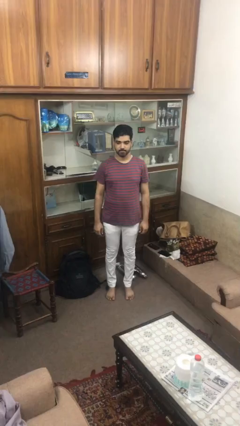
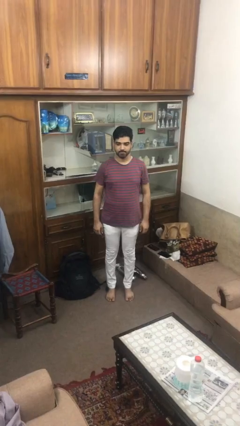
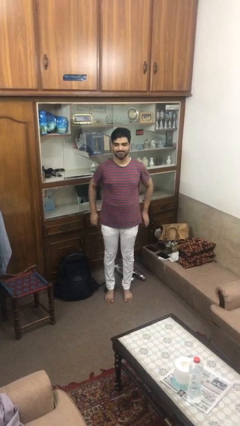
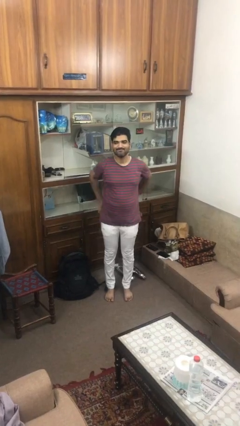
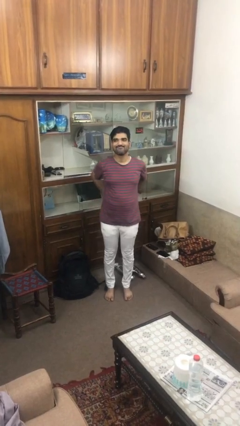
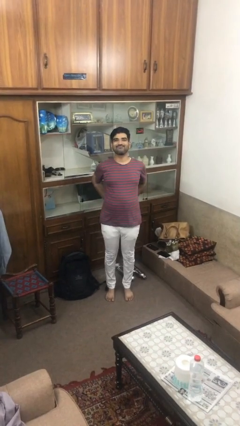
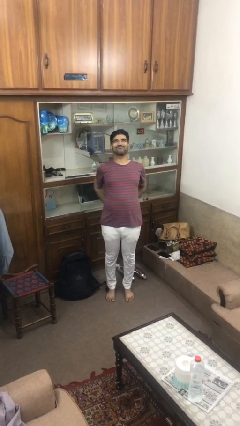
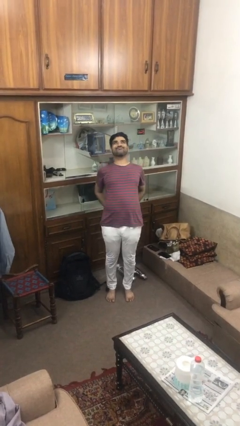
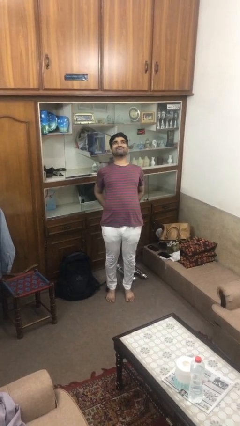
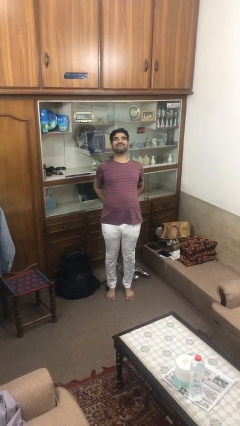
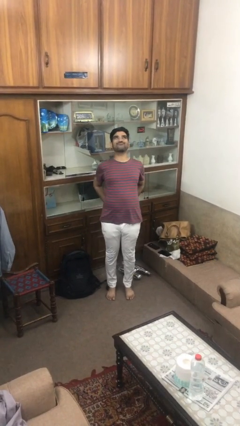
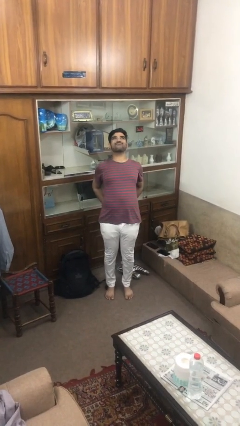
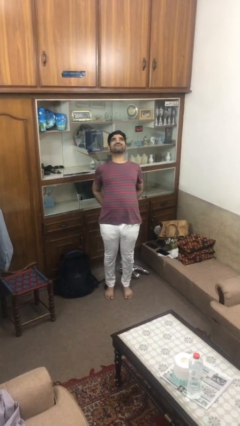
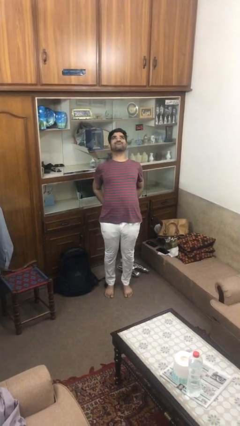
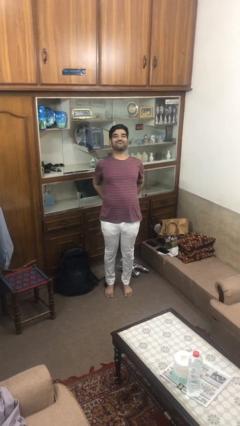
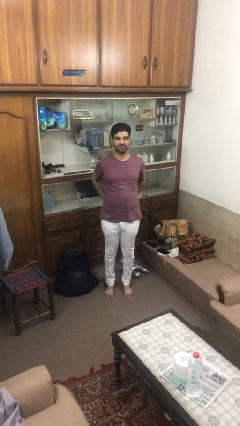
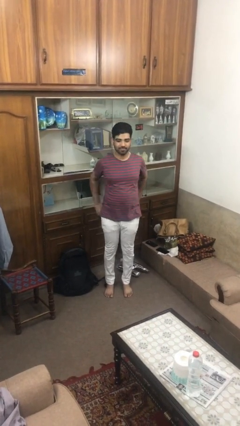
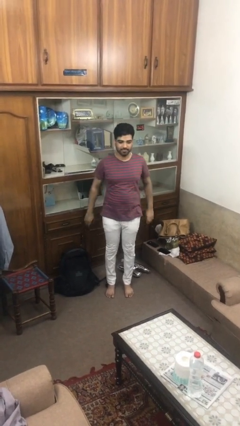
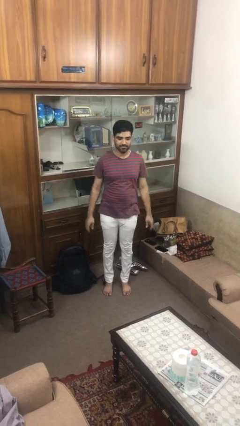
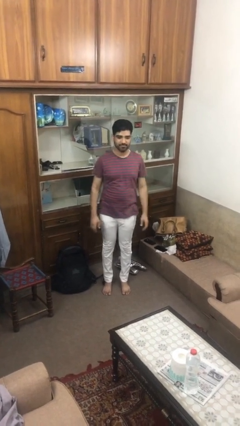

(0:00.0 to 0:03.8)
person stretches back

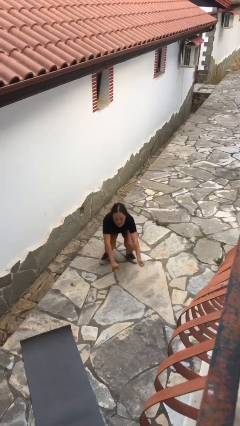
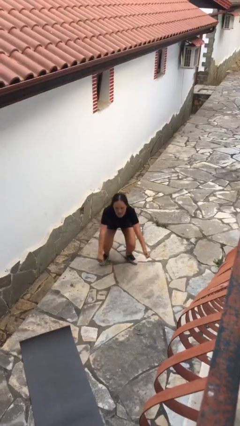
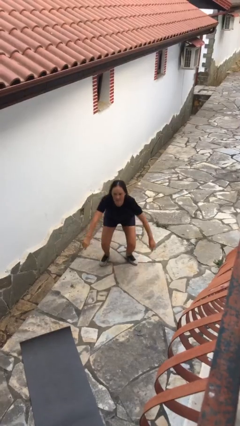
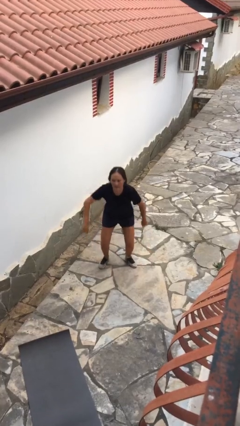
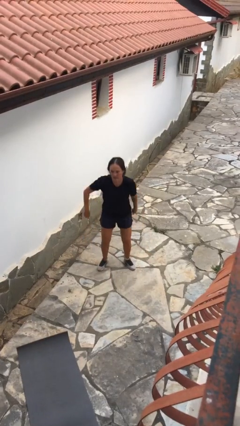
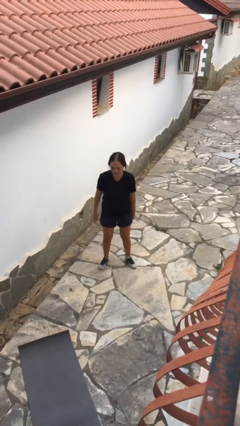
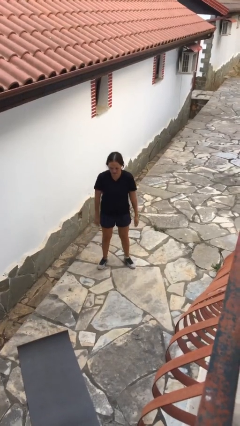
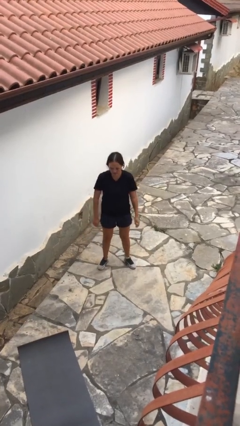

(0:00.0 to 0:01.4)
person stands up

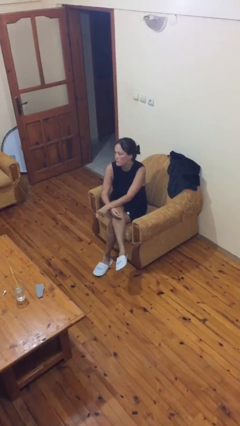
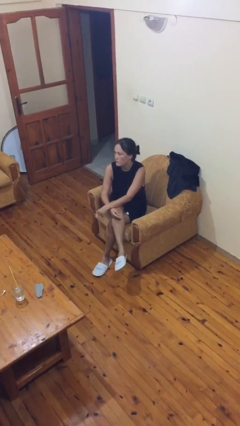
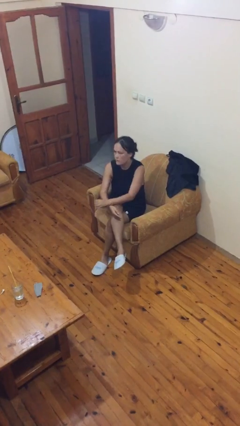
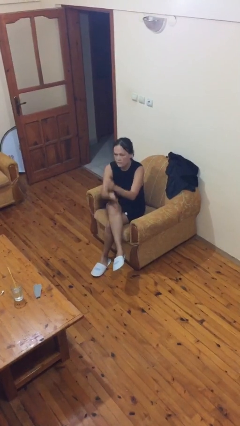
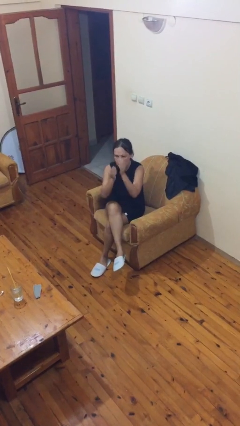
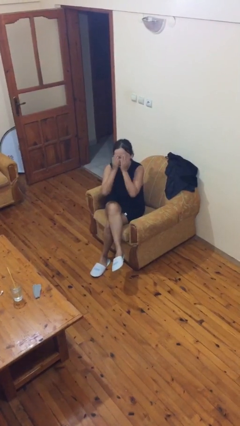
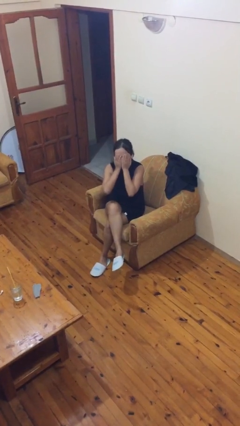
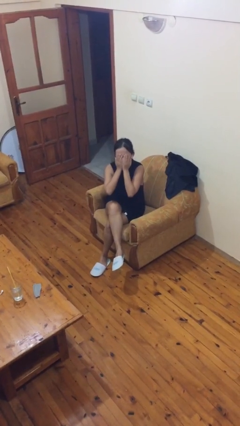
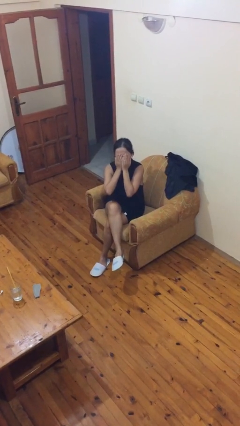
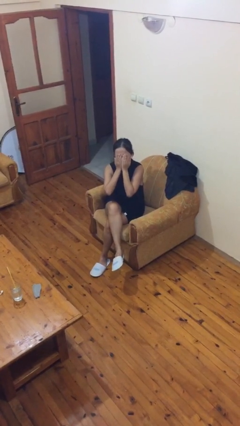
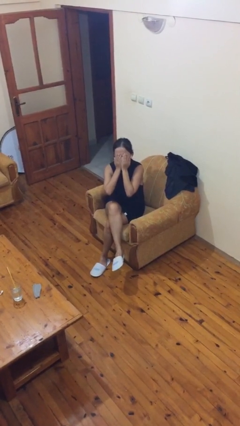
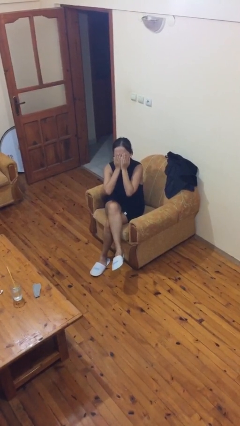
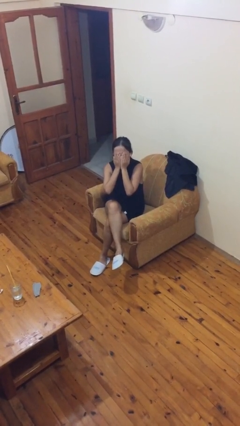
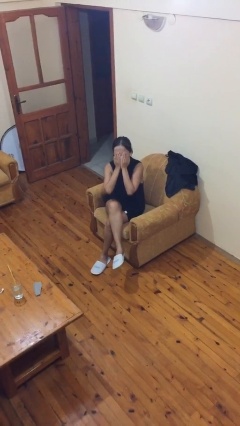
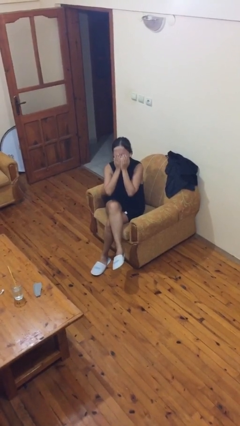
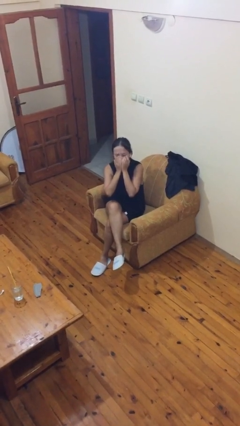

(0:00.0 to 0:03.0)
person covers face with hands

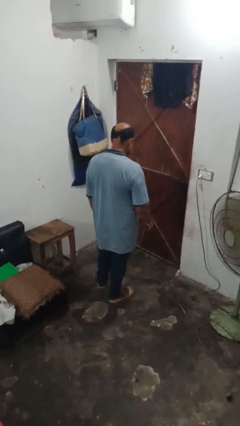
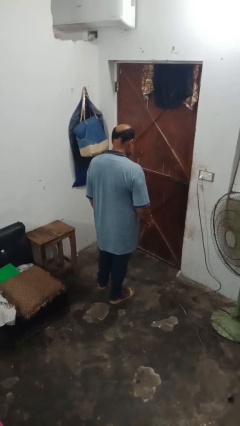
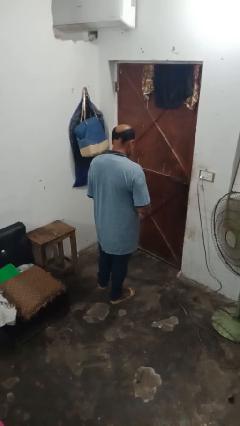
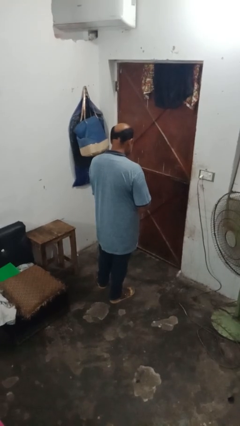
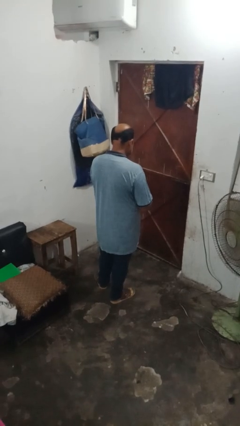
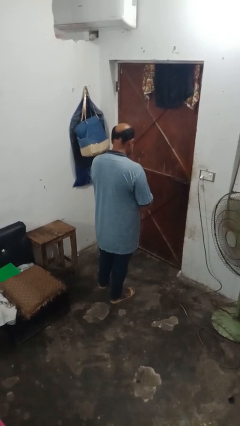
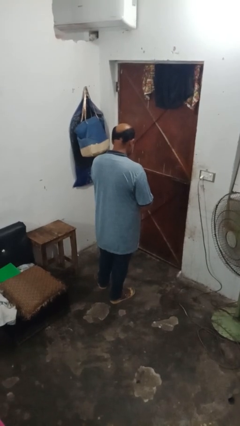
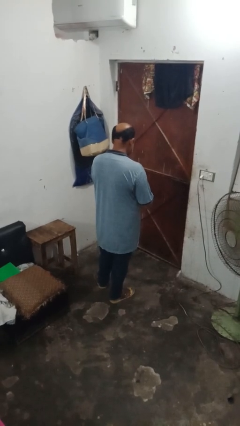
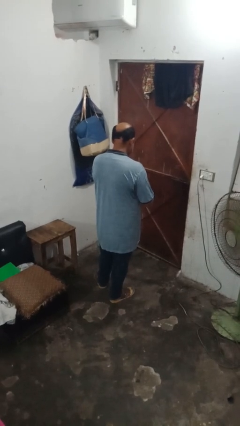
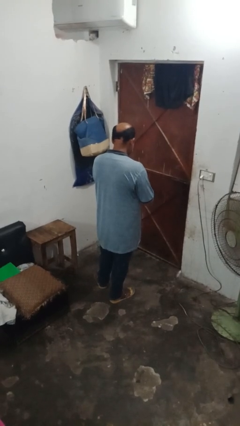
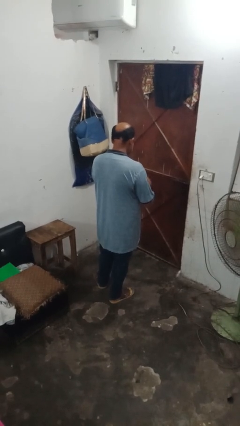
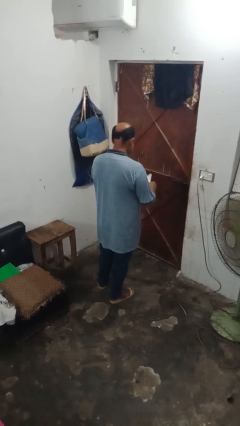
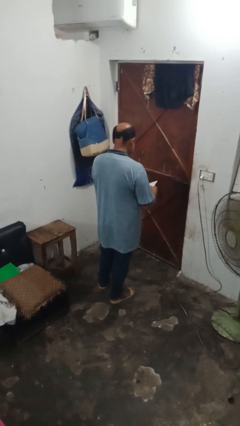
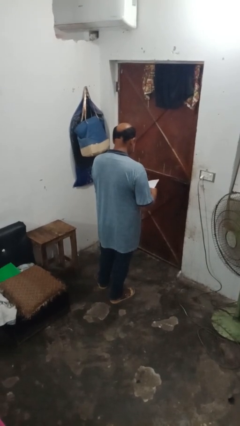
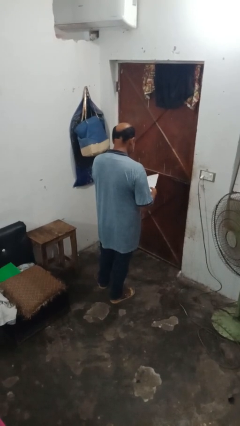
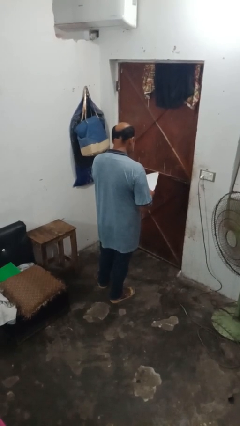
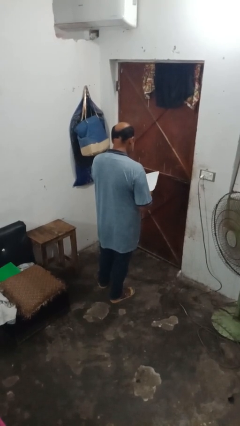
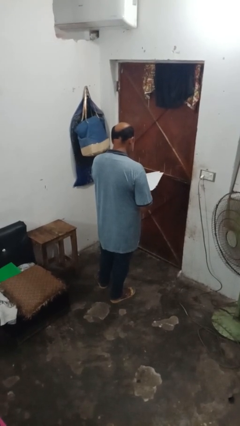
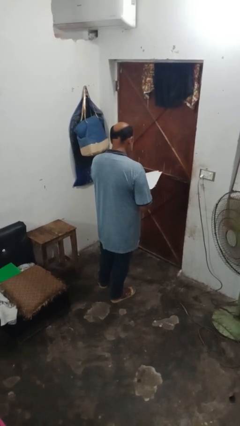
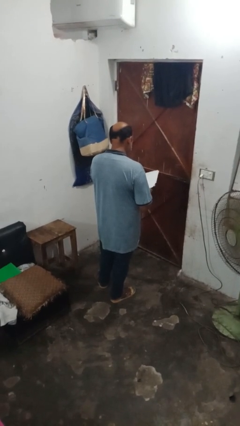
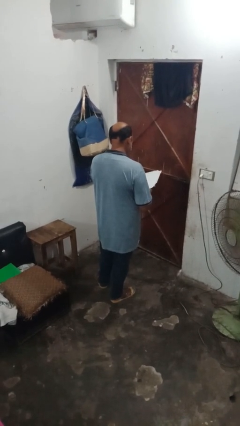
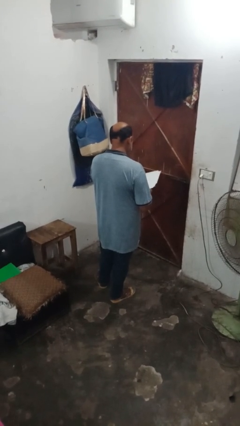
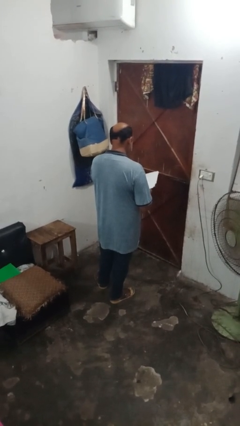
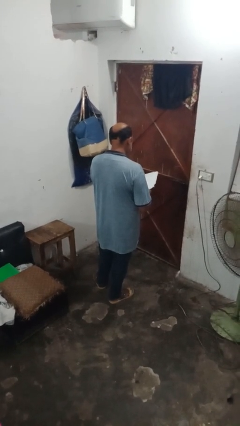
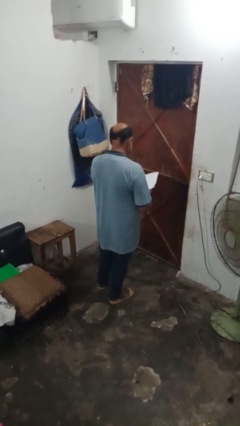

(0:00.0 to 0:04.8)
person reads magazine

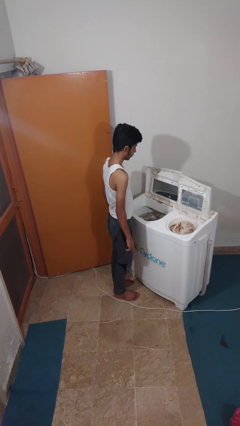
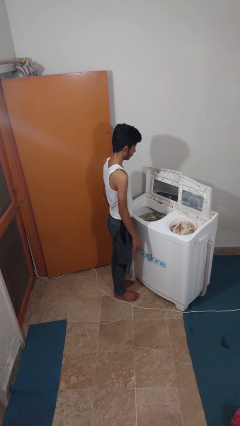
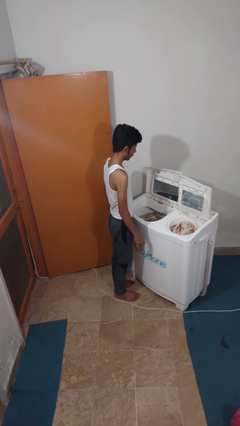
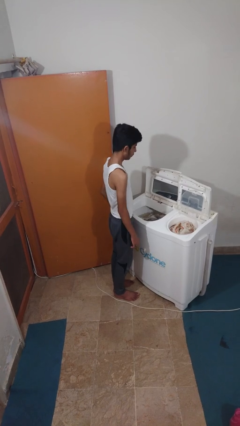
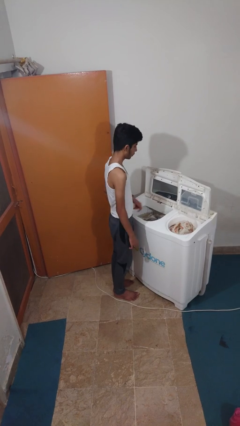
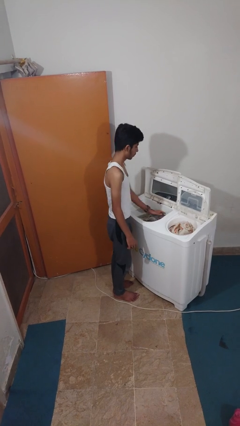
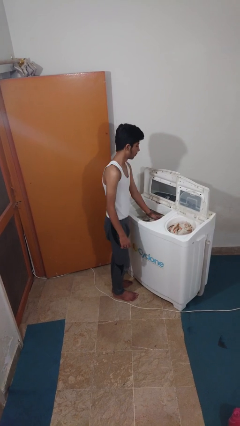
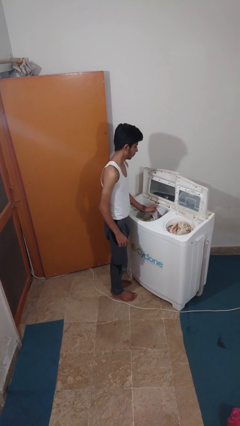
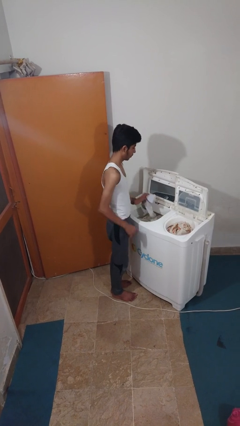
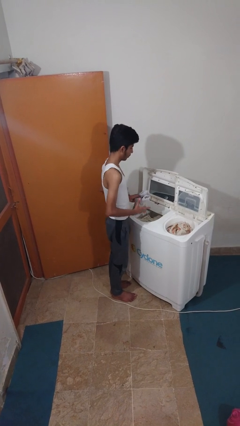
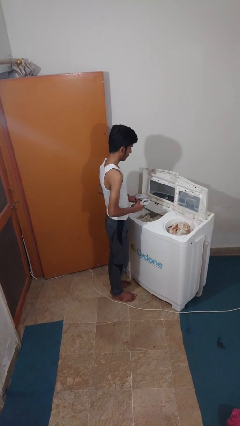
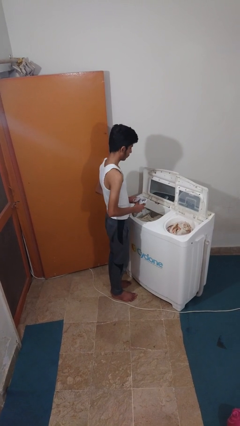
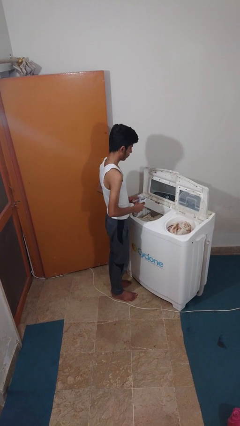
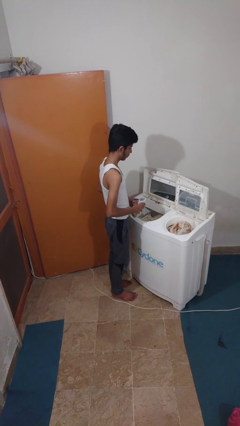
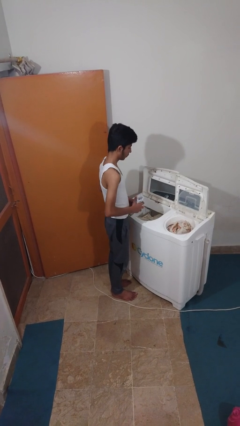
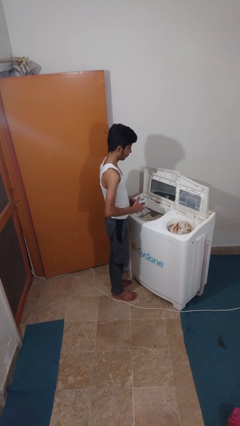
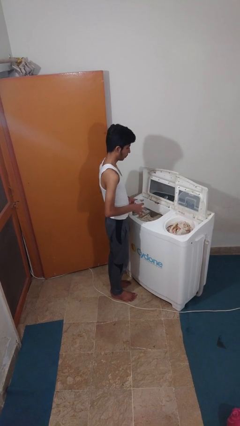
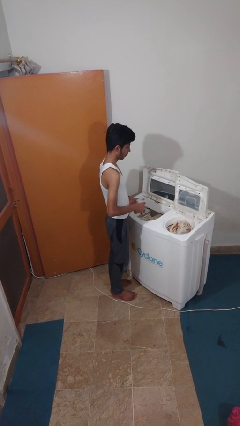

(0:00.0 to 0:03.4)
person unloads clotheswasher

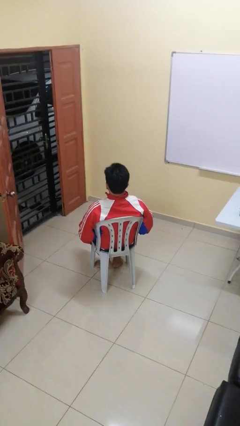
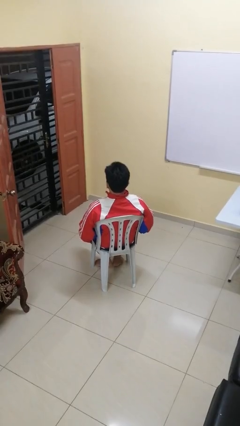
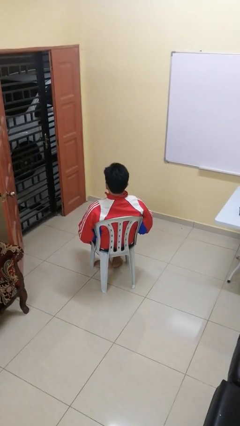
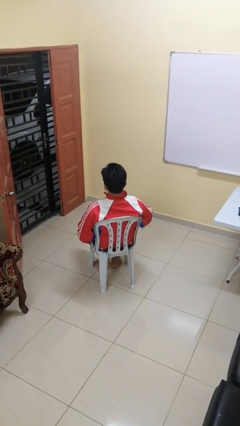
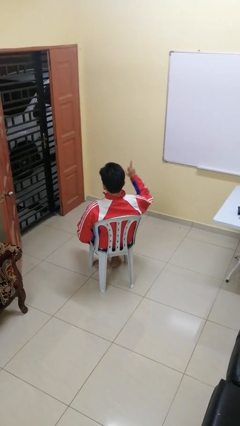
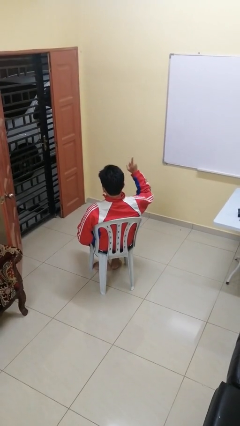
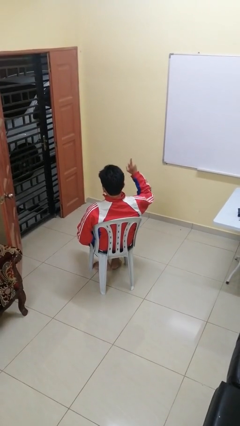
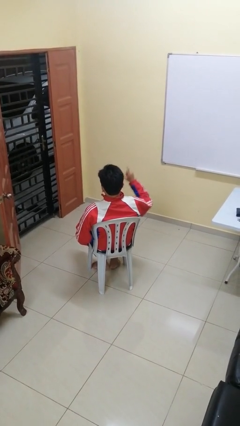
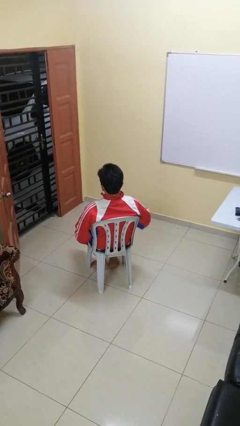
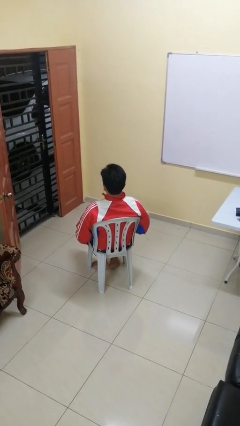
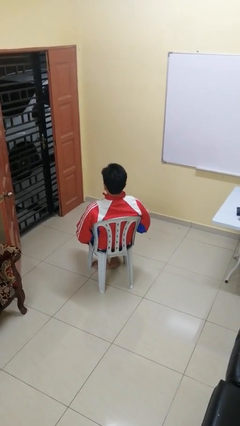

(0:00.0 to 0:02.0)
person gestures number one
